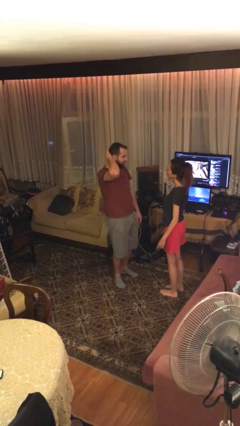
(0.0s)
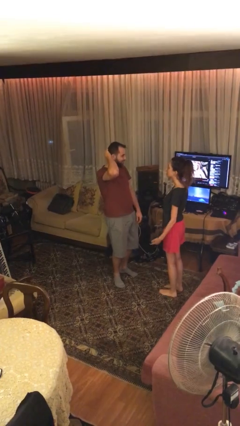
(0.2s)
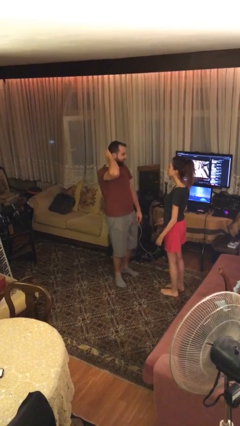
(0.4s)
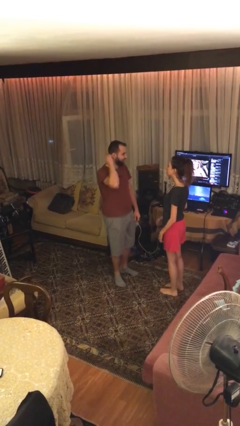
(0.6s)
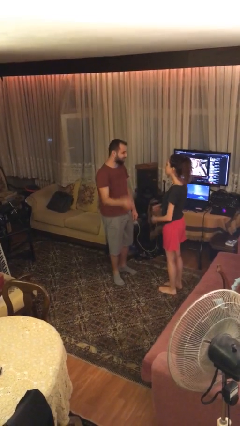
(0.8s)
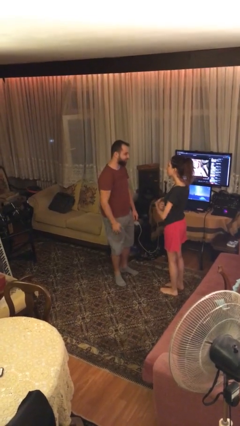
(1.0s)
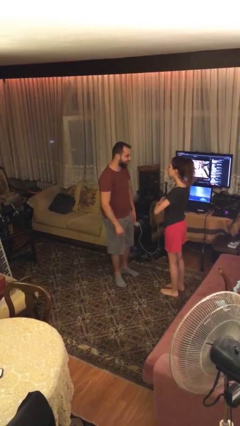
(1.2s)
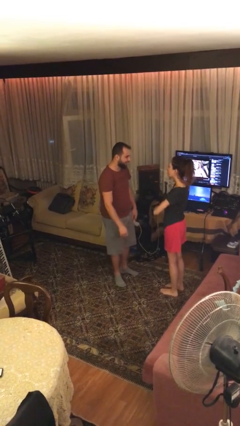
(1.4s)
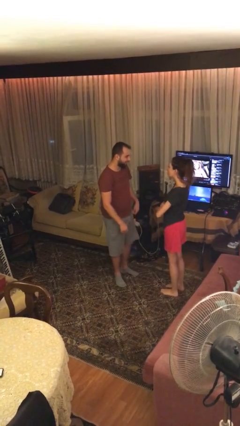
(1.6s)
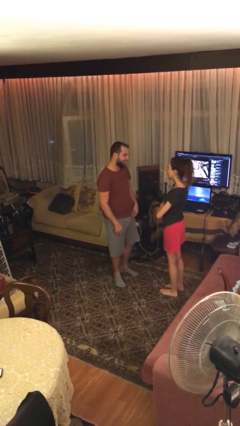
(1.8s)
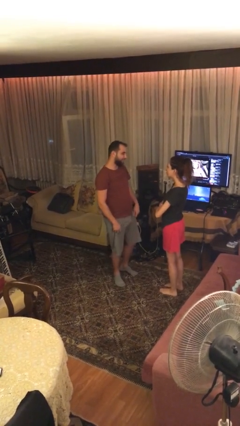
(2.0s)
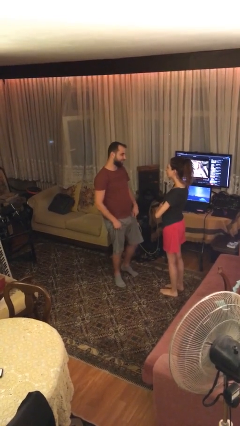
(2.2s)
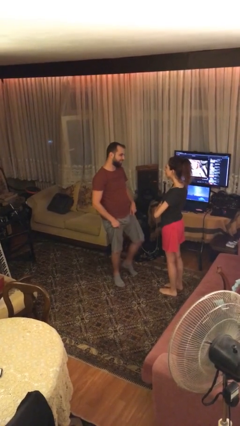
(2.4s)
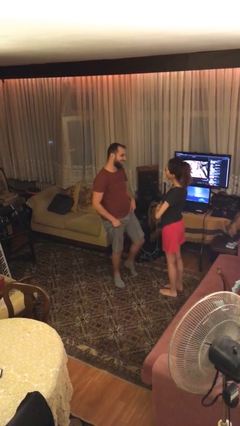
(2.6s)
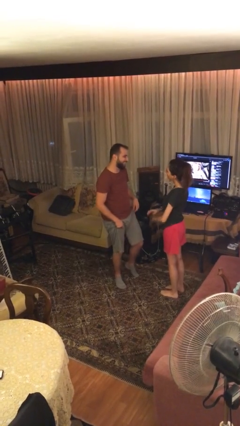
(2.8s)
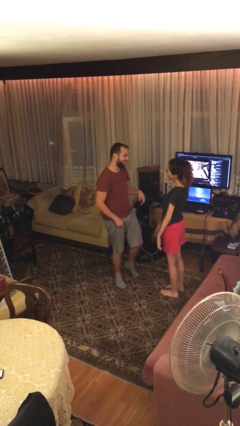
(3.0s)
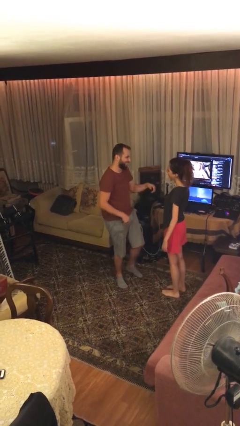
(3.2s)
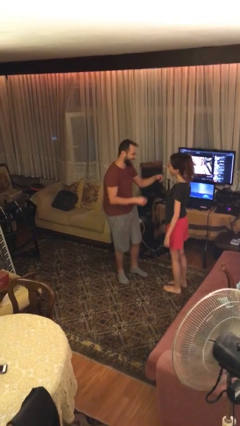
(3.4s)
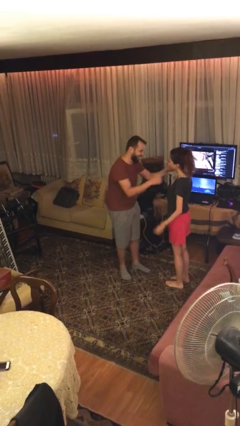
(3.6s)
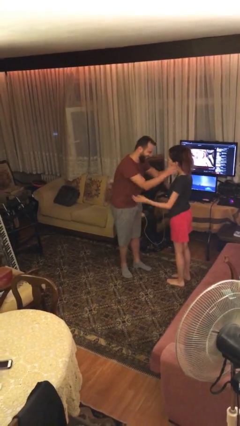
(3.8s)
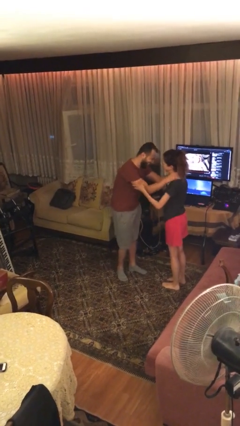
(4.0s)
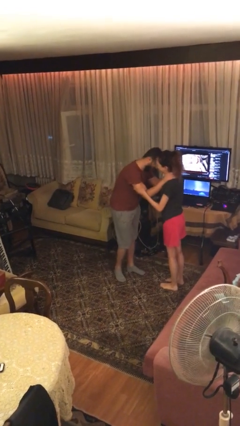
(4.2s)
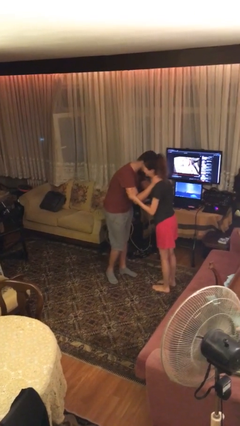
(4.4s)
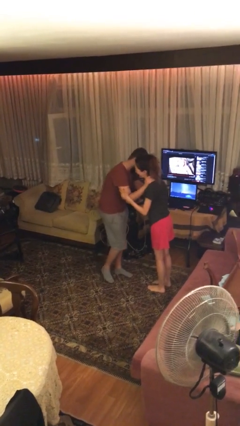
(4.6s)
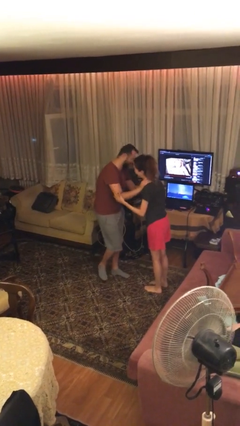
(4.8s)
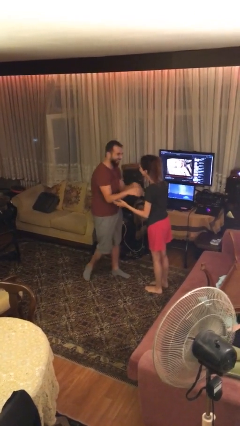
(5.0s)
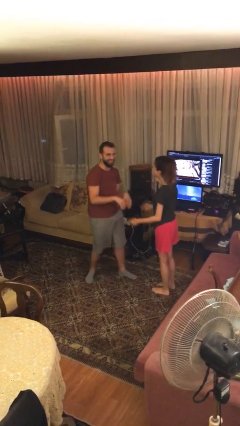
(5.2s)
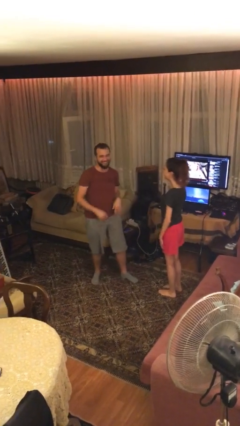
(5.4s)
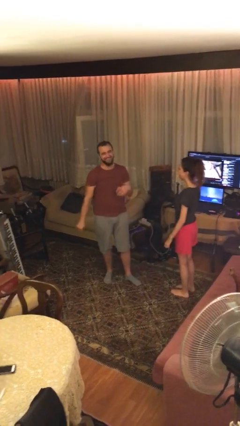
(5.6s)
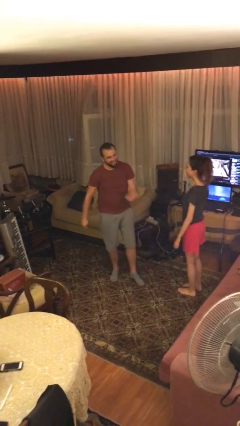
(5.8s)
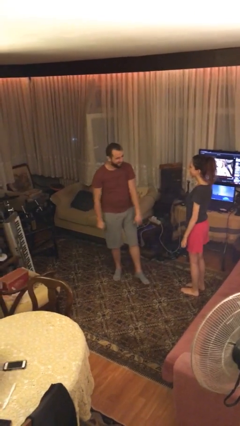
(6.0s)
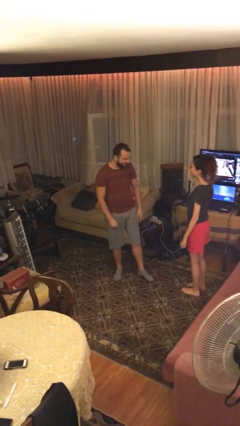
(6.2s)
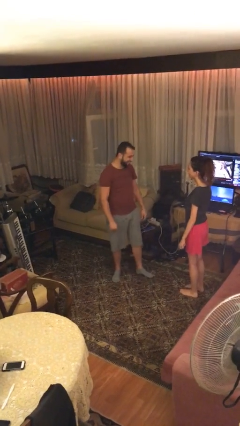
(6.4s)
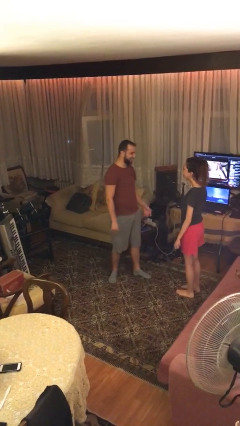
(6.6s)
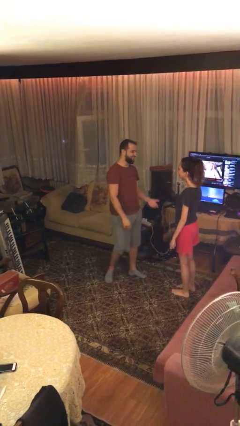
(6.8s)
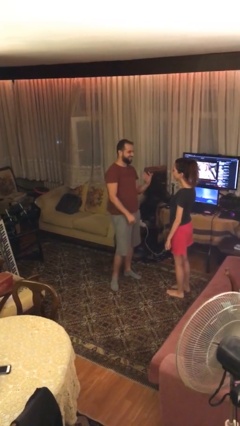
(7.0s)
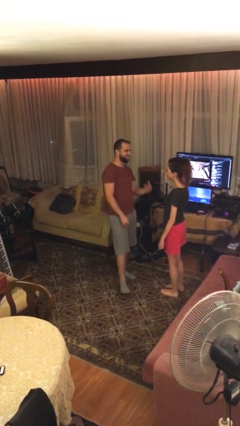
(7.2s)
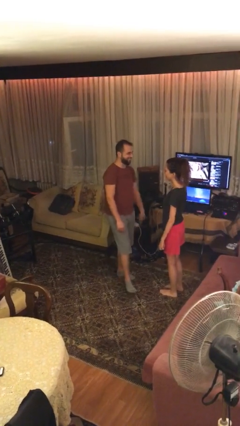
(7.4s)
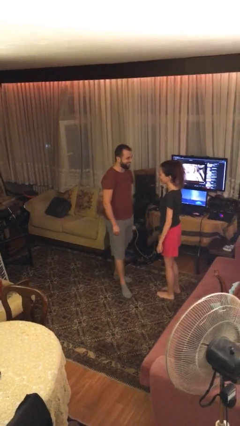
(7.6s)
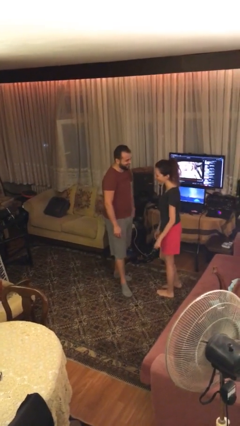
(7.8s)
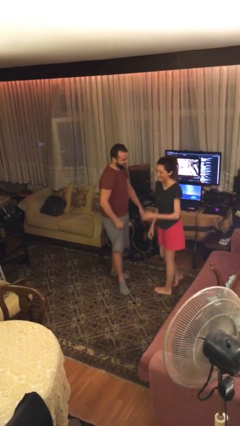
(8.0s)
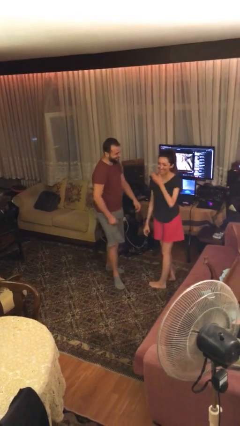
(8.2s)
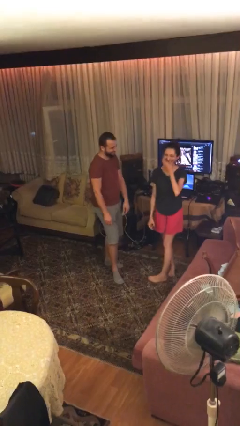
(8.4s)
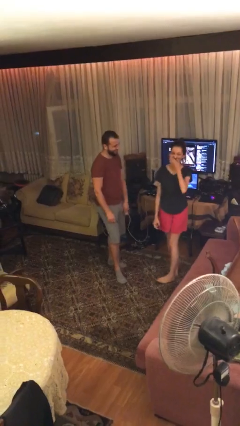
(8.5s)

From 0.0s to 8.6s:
person talks to person

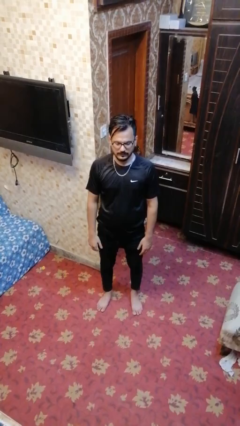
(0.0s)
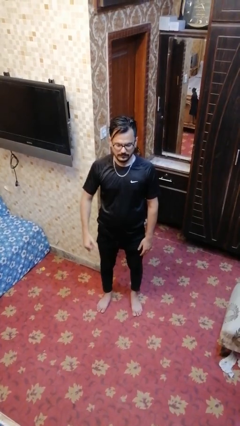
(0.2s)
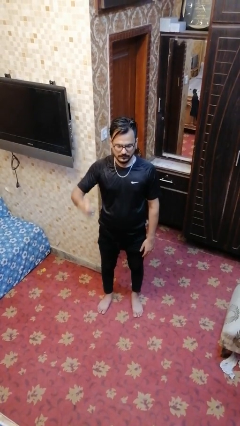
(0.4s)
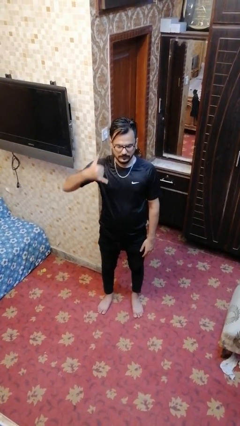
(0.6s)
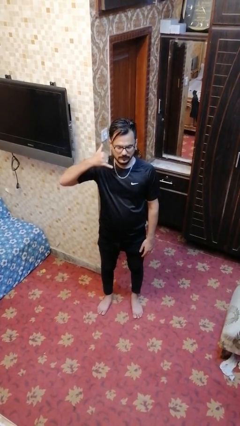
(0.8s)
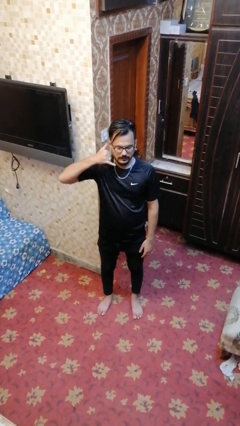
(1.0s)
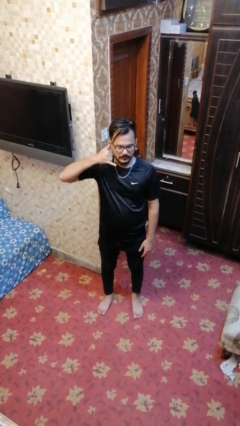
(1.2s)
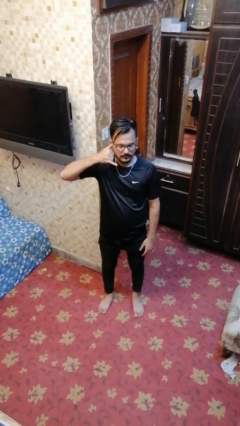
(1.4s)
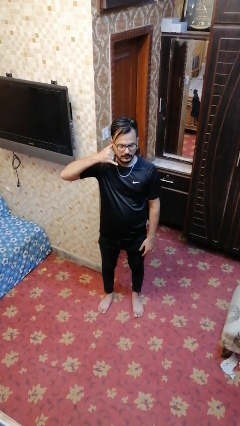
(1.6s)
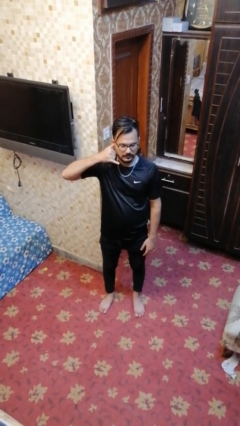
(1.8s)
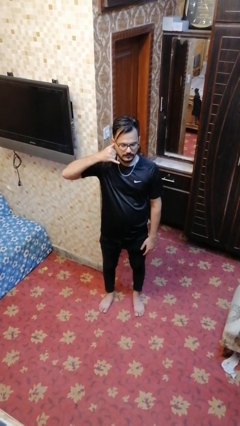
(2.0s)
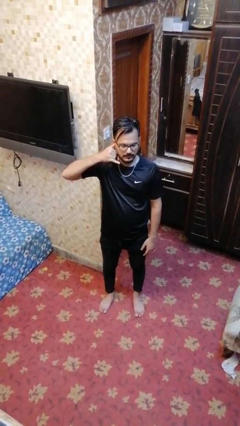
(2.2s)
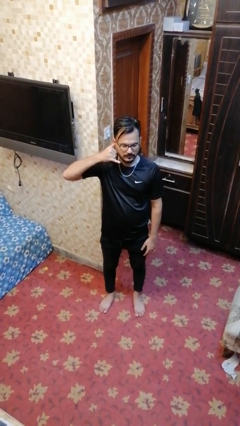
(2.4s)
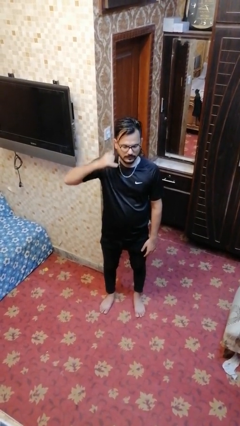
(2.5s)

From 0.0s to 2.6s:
person gestures call me

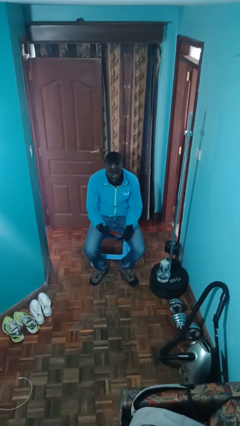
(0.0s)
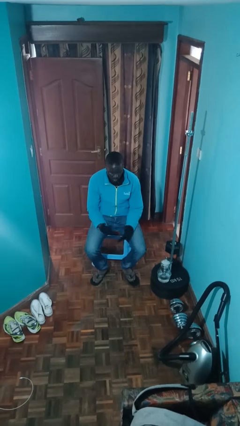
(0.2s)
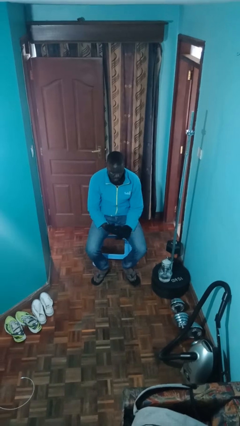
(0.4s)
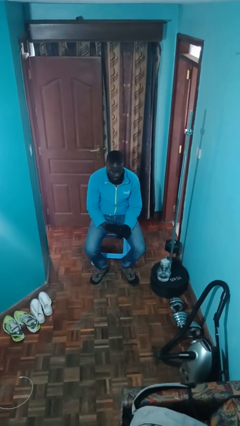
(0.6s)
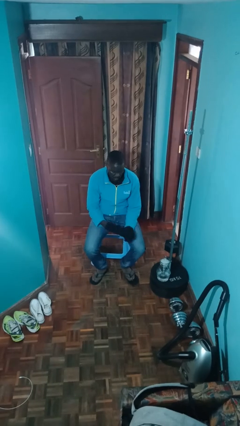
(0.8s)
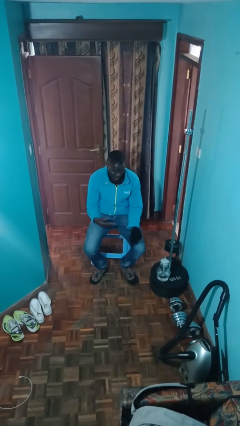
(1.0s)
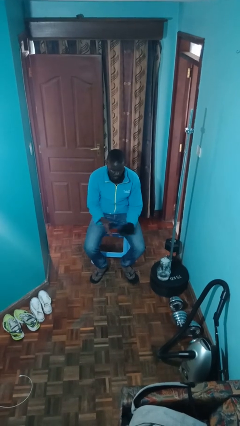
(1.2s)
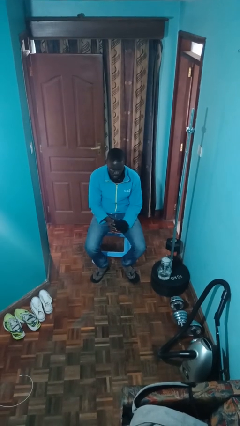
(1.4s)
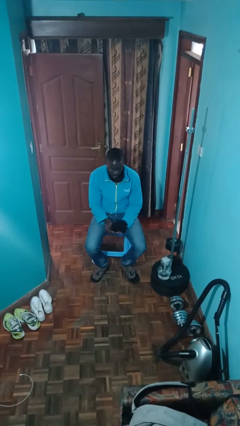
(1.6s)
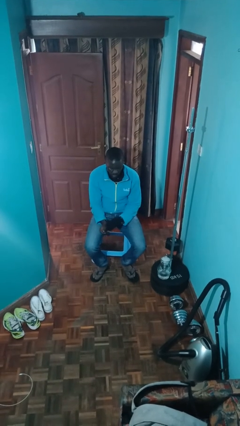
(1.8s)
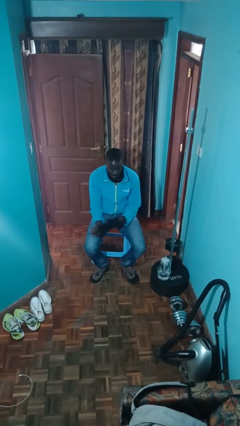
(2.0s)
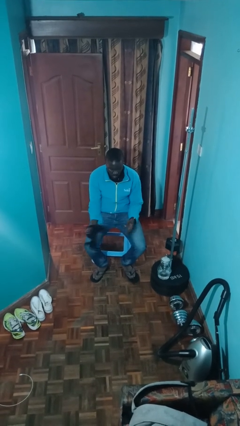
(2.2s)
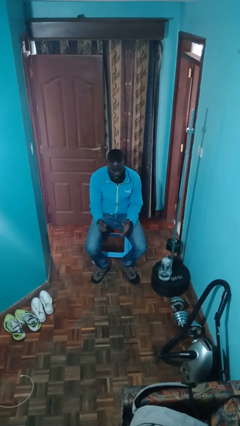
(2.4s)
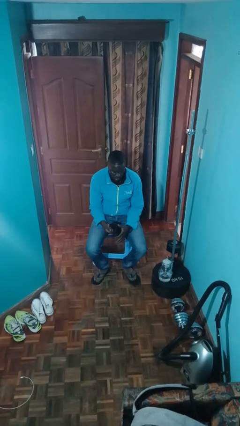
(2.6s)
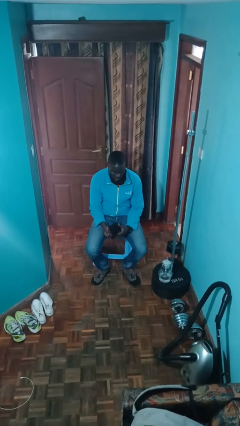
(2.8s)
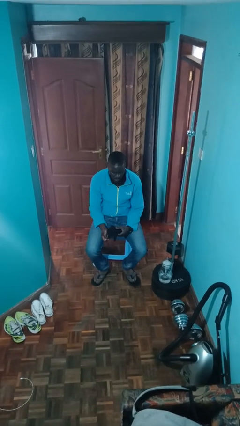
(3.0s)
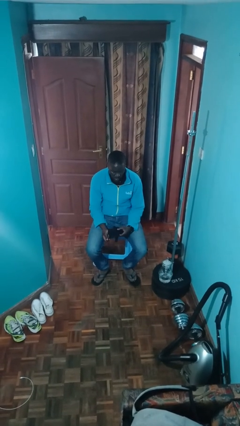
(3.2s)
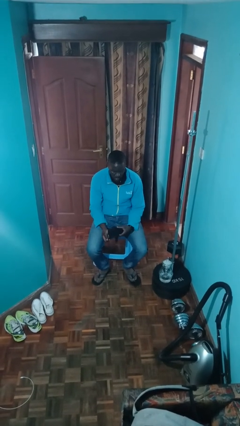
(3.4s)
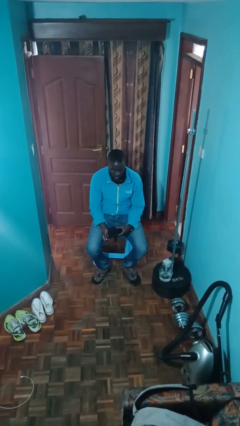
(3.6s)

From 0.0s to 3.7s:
person takes off gloves

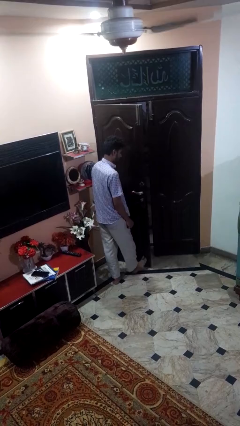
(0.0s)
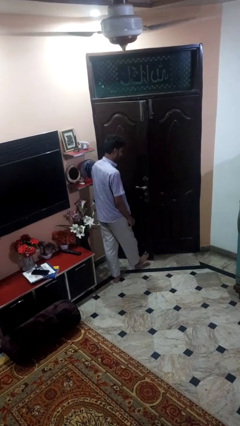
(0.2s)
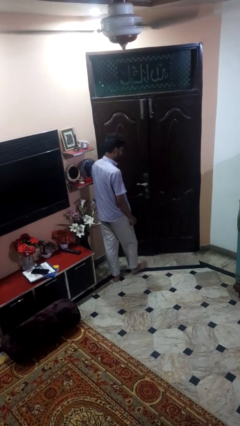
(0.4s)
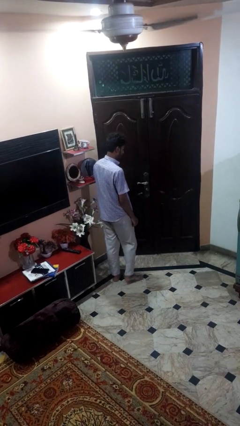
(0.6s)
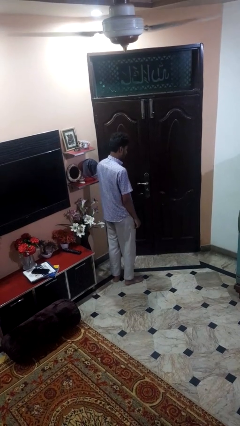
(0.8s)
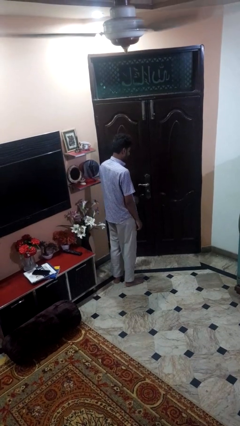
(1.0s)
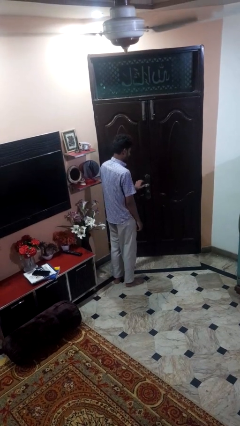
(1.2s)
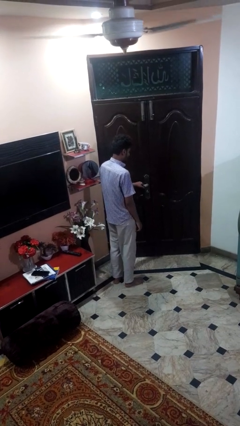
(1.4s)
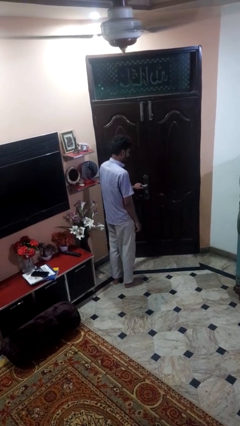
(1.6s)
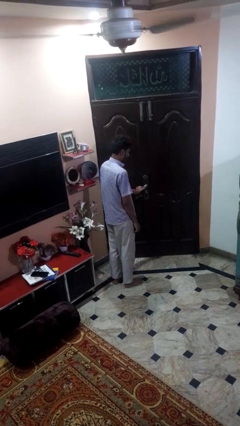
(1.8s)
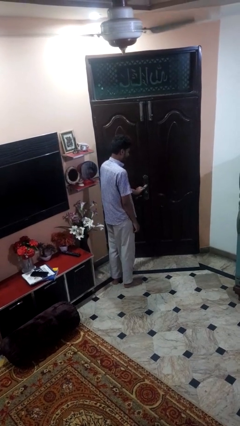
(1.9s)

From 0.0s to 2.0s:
person closes door with foot

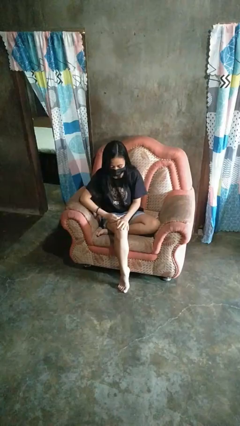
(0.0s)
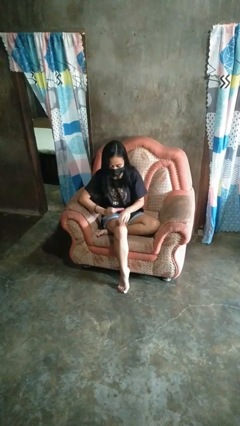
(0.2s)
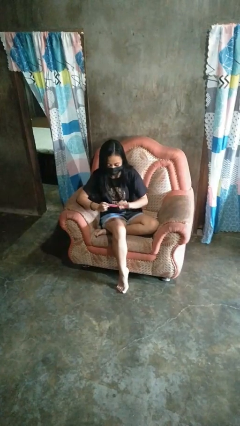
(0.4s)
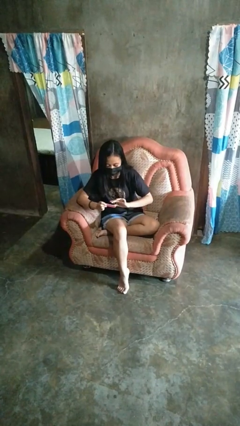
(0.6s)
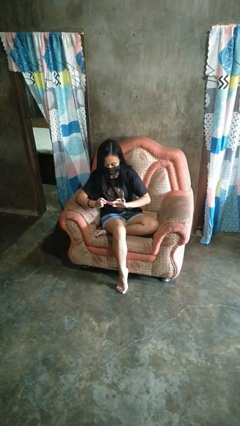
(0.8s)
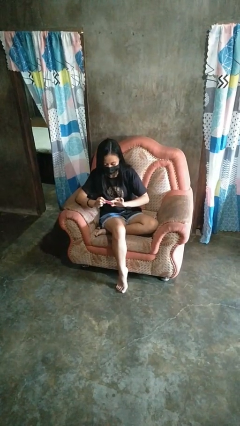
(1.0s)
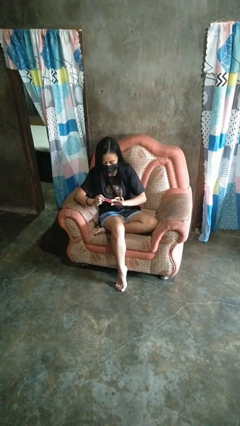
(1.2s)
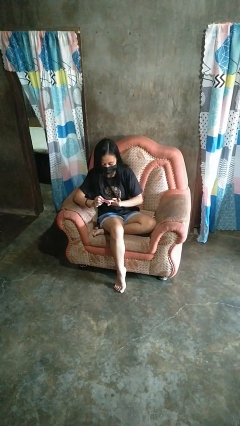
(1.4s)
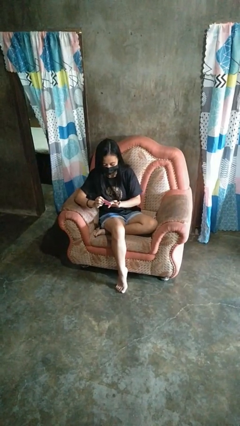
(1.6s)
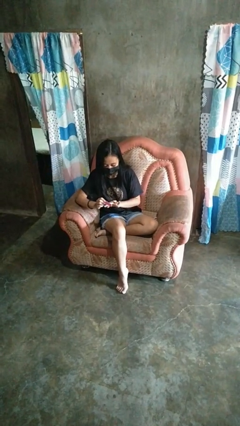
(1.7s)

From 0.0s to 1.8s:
person files fingernails
